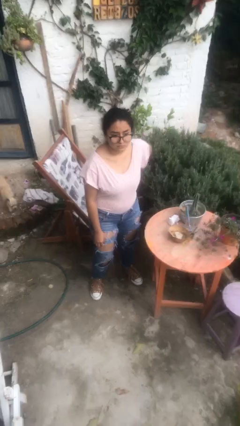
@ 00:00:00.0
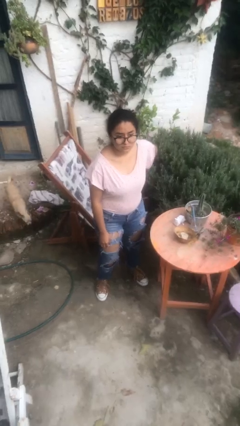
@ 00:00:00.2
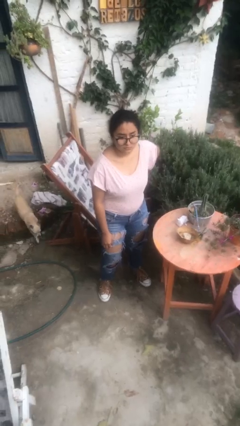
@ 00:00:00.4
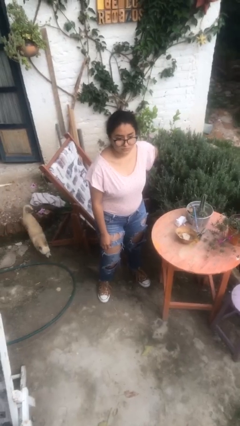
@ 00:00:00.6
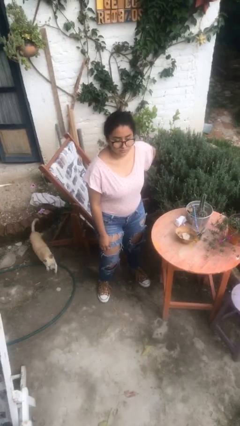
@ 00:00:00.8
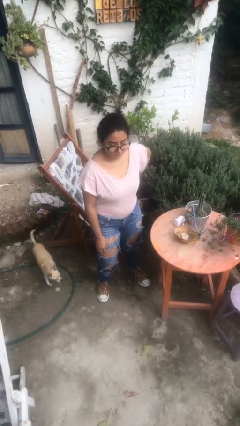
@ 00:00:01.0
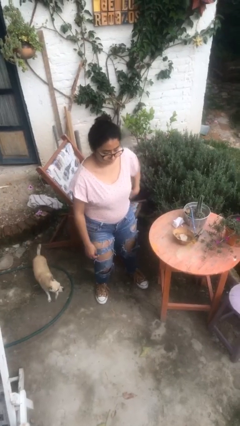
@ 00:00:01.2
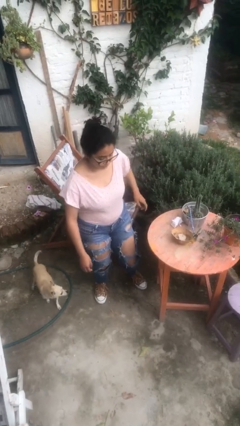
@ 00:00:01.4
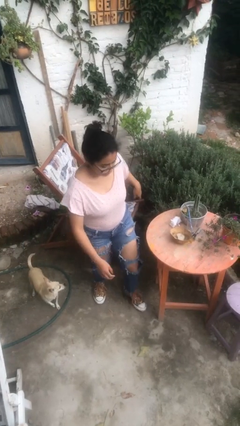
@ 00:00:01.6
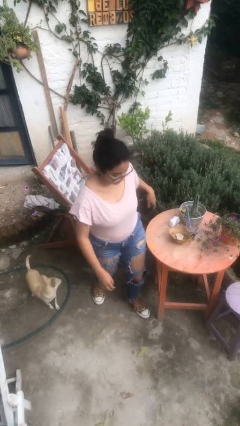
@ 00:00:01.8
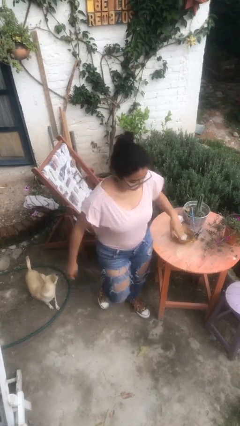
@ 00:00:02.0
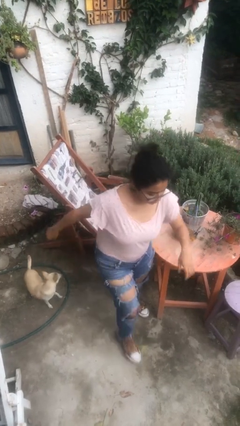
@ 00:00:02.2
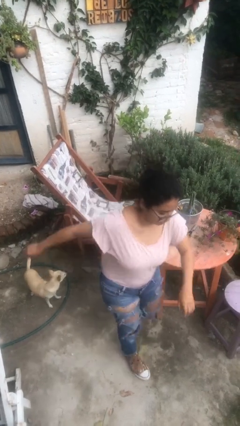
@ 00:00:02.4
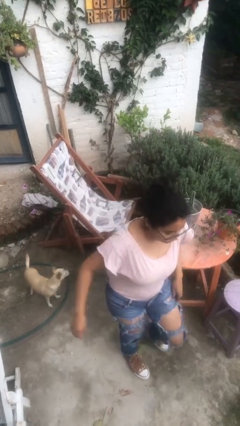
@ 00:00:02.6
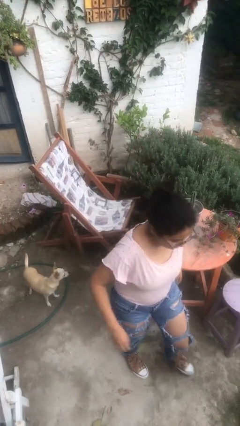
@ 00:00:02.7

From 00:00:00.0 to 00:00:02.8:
person bumps into table

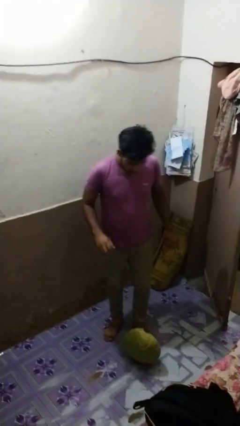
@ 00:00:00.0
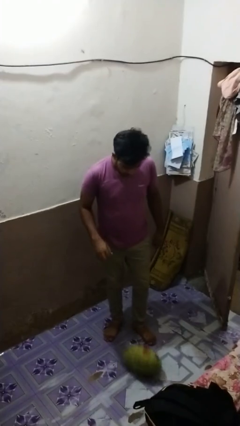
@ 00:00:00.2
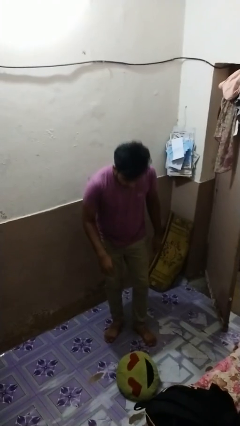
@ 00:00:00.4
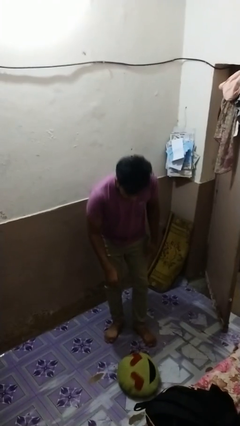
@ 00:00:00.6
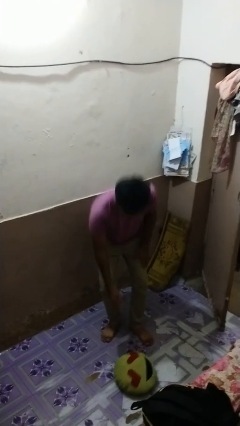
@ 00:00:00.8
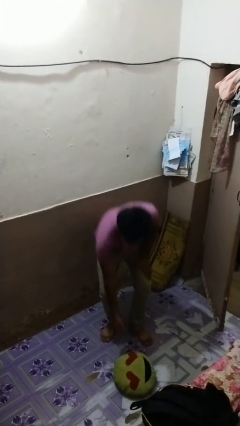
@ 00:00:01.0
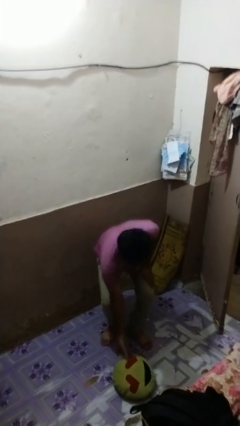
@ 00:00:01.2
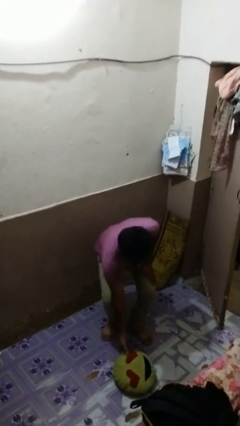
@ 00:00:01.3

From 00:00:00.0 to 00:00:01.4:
person drops object

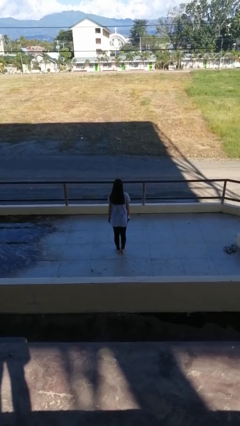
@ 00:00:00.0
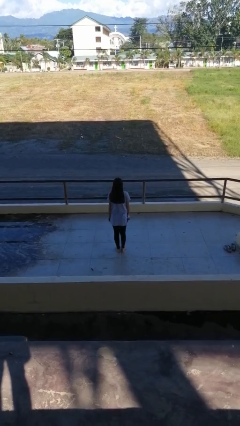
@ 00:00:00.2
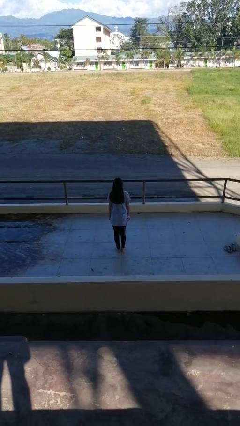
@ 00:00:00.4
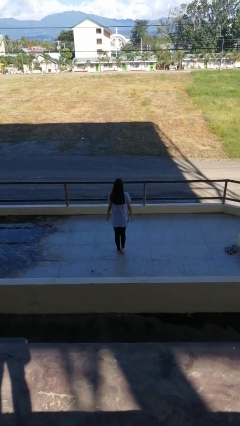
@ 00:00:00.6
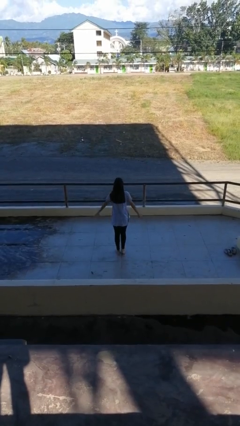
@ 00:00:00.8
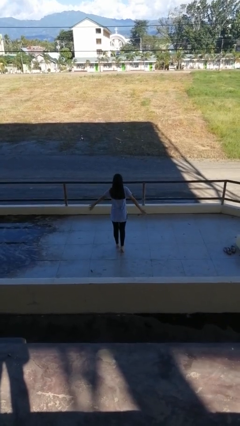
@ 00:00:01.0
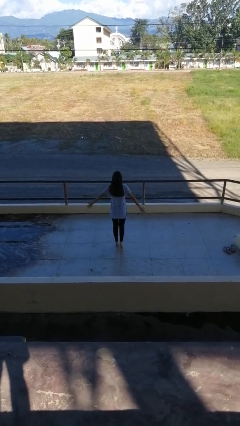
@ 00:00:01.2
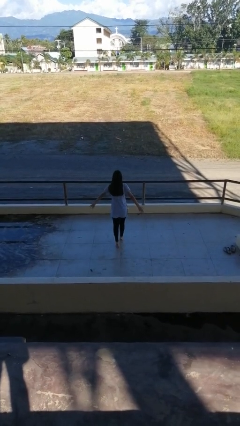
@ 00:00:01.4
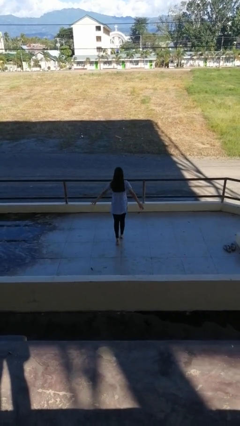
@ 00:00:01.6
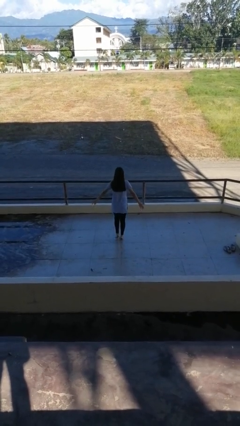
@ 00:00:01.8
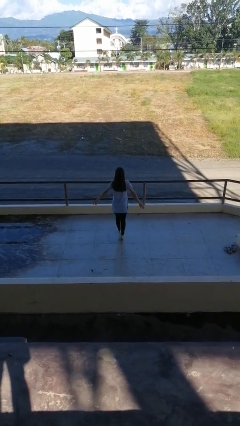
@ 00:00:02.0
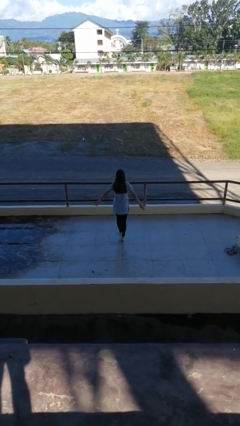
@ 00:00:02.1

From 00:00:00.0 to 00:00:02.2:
person walks tiptoe

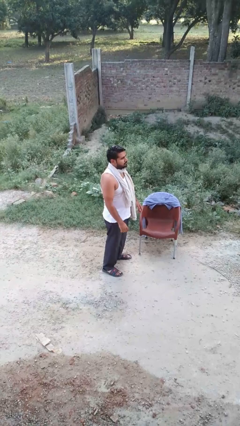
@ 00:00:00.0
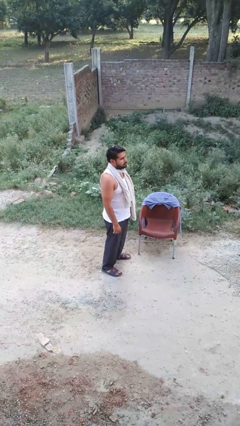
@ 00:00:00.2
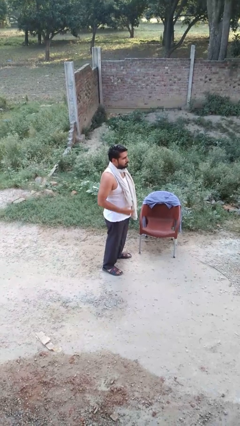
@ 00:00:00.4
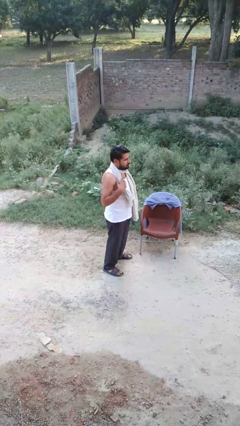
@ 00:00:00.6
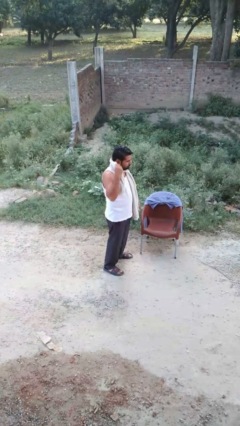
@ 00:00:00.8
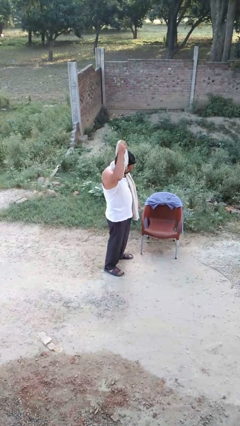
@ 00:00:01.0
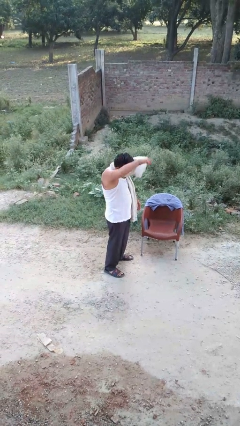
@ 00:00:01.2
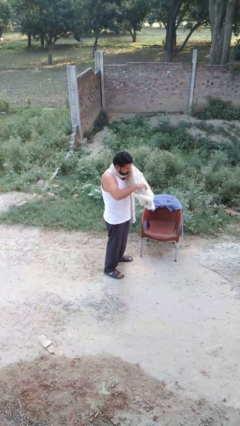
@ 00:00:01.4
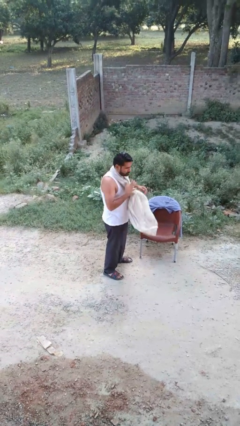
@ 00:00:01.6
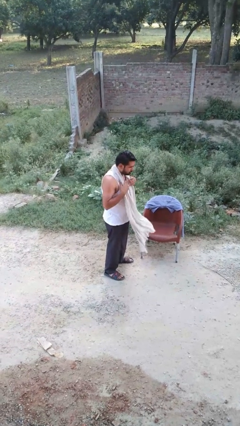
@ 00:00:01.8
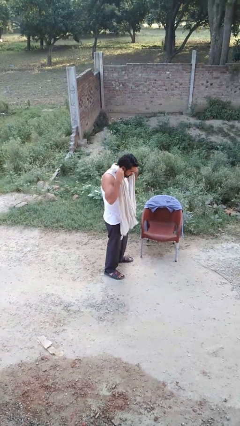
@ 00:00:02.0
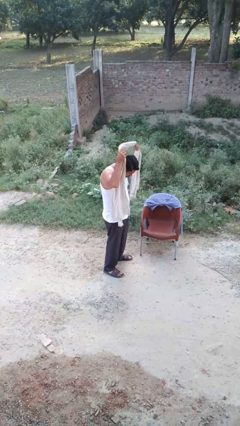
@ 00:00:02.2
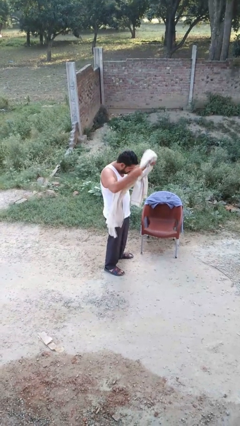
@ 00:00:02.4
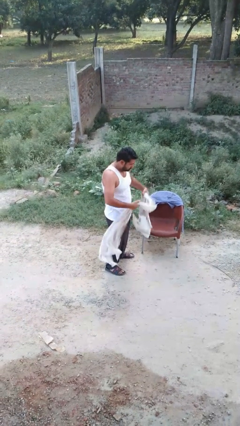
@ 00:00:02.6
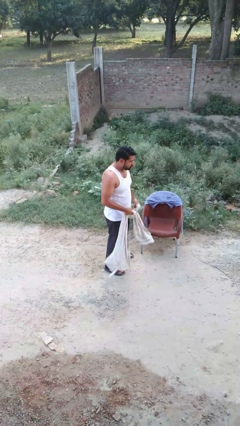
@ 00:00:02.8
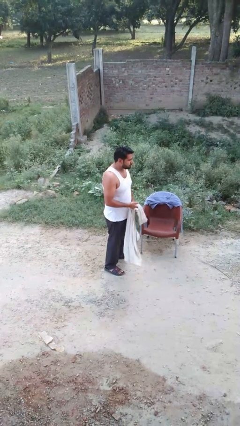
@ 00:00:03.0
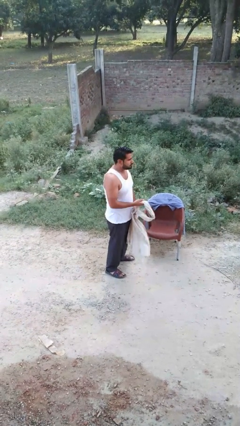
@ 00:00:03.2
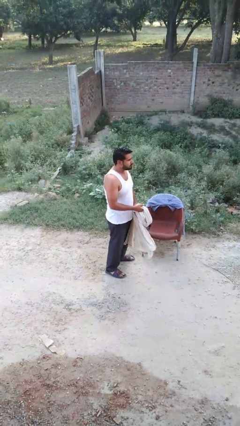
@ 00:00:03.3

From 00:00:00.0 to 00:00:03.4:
person takes off scarf

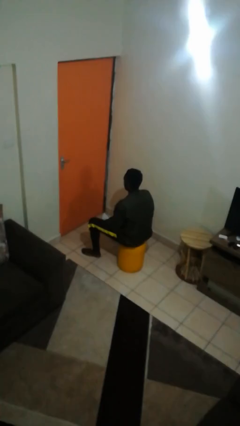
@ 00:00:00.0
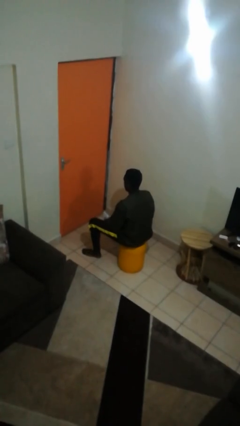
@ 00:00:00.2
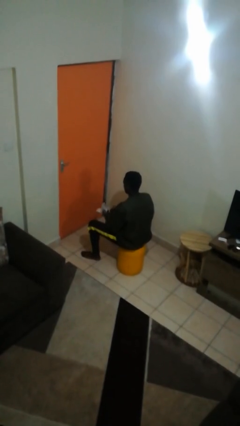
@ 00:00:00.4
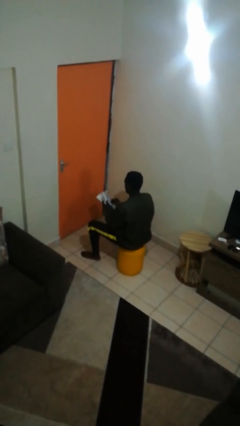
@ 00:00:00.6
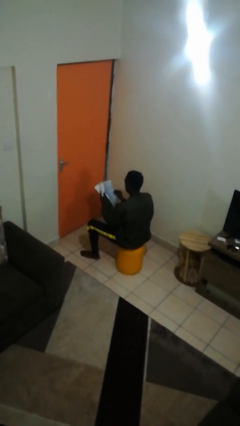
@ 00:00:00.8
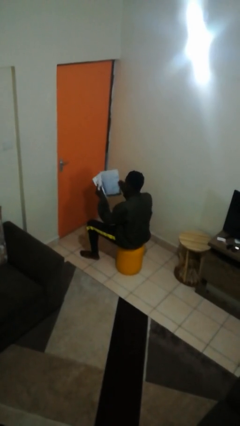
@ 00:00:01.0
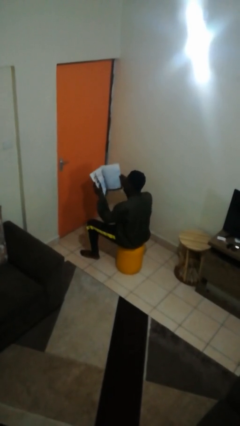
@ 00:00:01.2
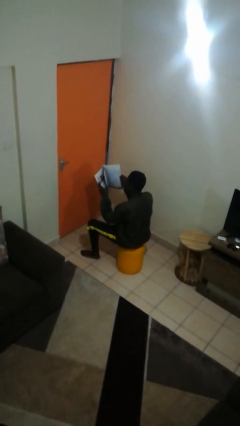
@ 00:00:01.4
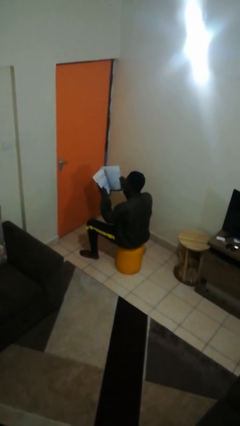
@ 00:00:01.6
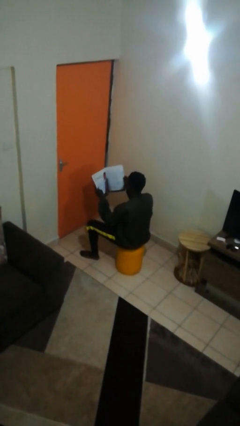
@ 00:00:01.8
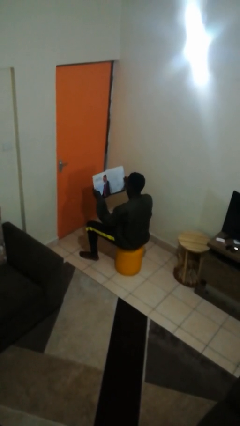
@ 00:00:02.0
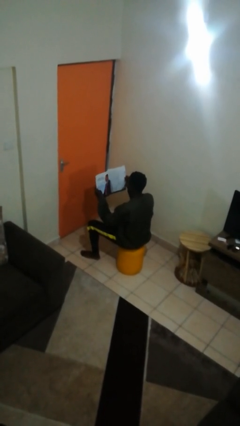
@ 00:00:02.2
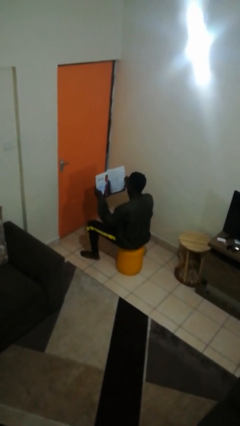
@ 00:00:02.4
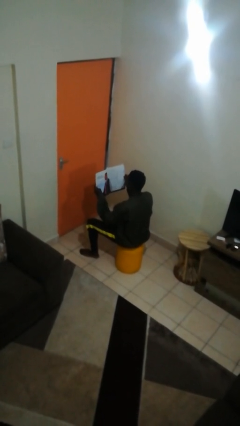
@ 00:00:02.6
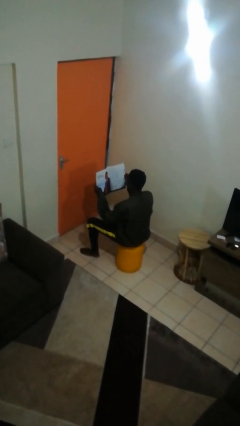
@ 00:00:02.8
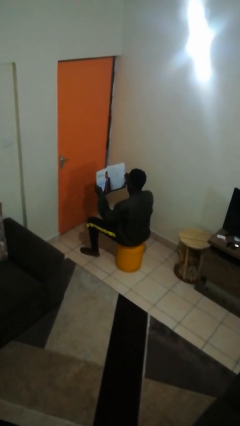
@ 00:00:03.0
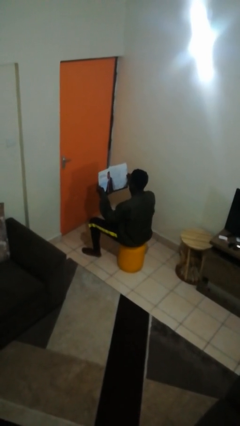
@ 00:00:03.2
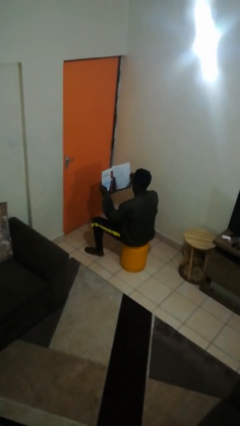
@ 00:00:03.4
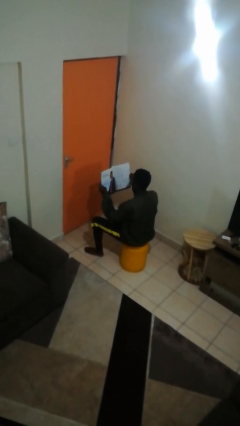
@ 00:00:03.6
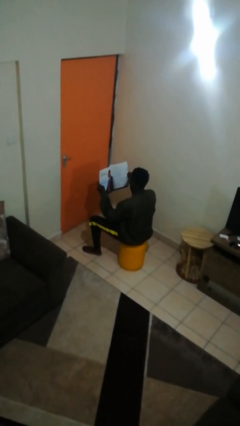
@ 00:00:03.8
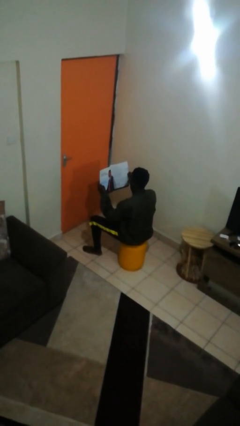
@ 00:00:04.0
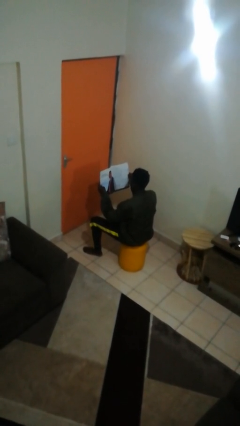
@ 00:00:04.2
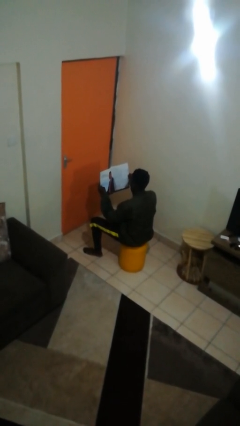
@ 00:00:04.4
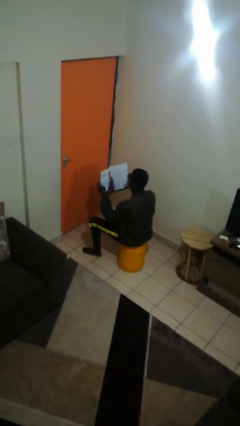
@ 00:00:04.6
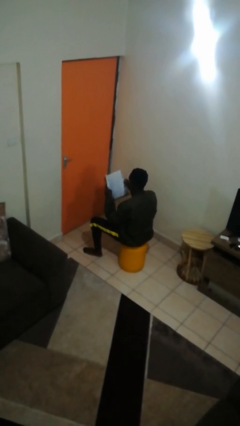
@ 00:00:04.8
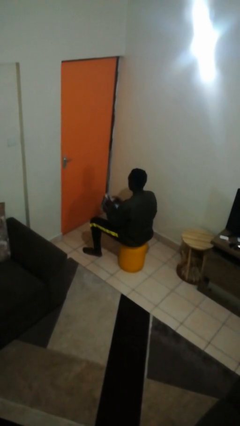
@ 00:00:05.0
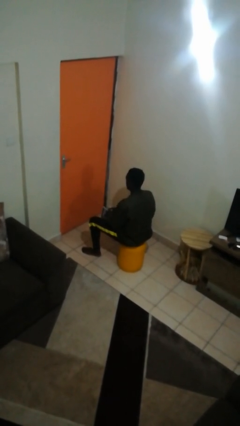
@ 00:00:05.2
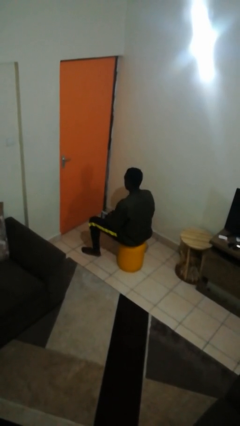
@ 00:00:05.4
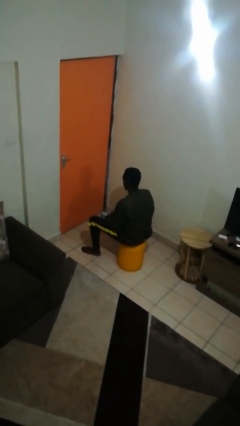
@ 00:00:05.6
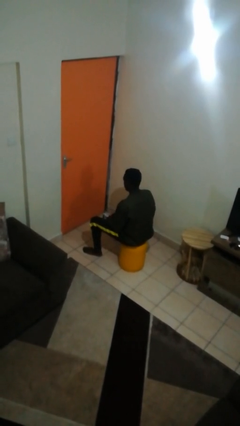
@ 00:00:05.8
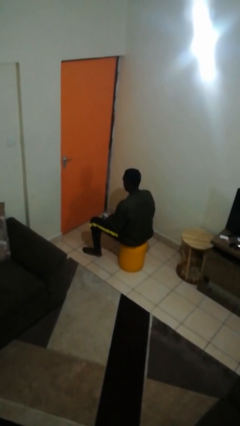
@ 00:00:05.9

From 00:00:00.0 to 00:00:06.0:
person reads magazine

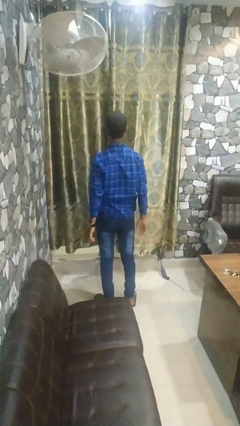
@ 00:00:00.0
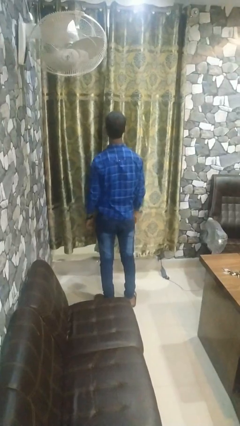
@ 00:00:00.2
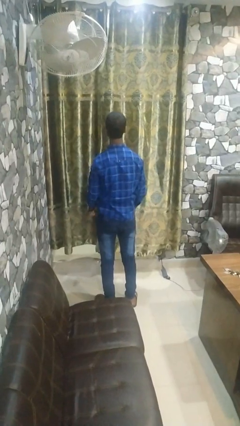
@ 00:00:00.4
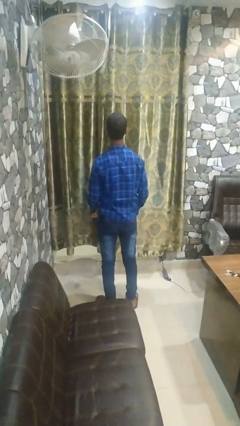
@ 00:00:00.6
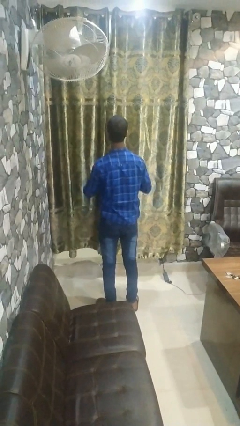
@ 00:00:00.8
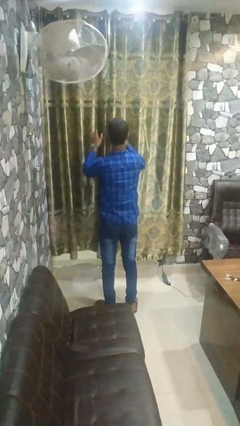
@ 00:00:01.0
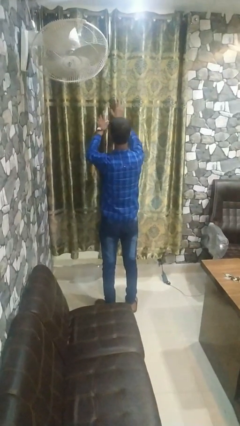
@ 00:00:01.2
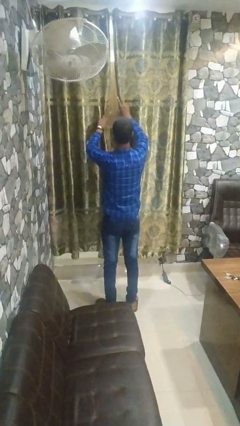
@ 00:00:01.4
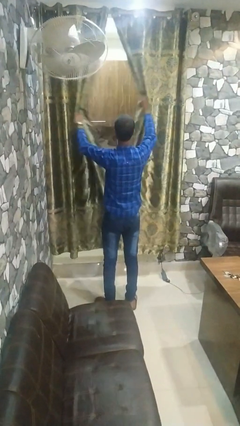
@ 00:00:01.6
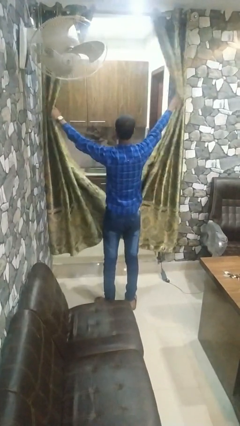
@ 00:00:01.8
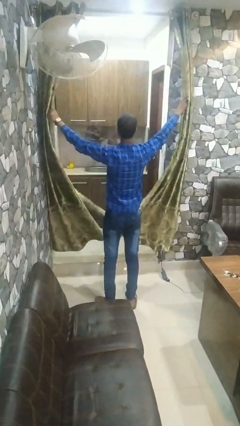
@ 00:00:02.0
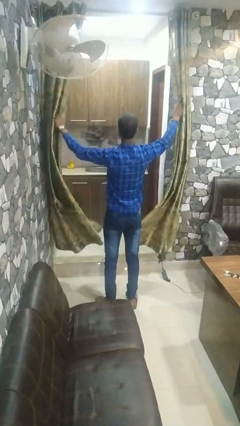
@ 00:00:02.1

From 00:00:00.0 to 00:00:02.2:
person opens curtains
